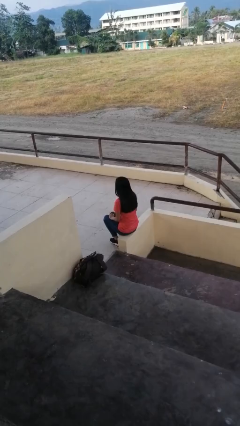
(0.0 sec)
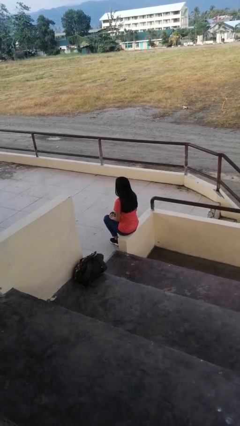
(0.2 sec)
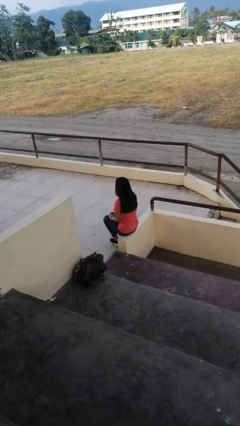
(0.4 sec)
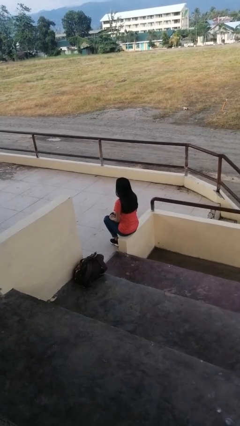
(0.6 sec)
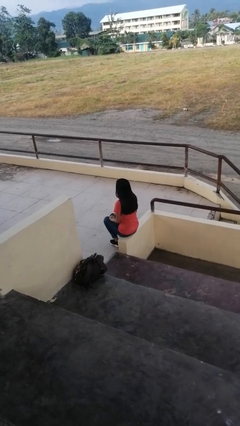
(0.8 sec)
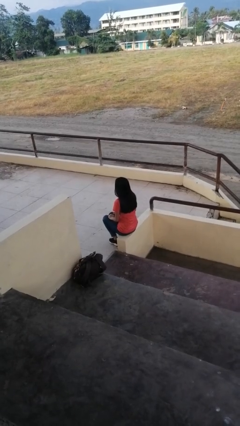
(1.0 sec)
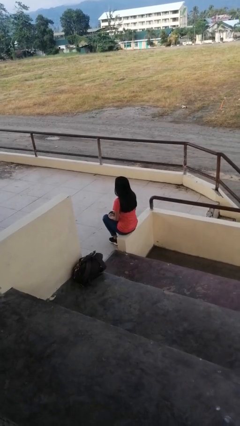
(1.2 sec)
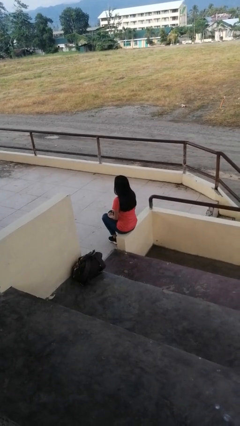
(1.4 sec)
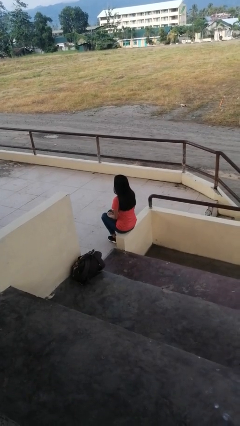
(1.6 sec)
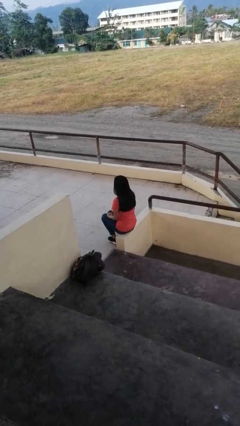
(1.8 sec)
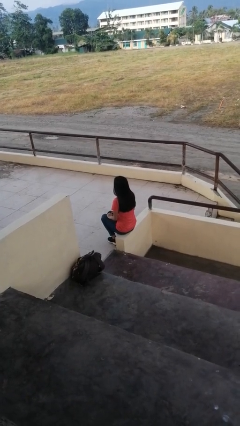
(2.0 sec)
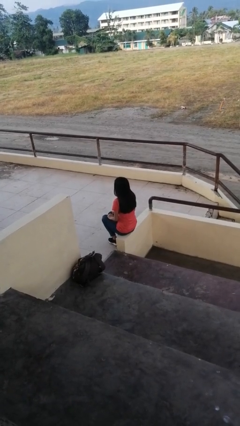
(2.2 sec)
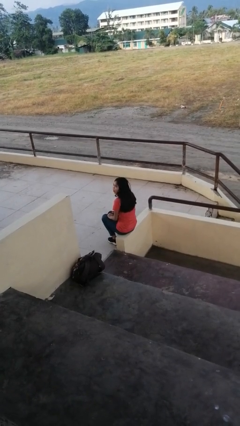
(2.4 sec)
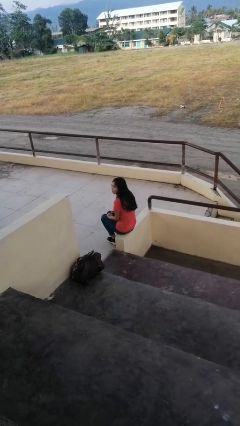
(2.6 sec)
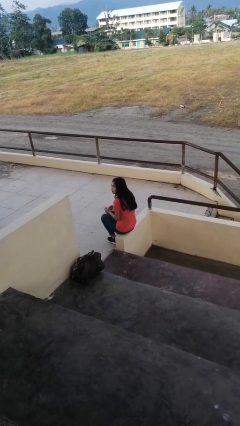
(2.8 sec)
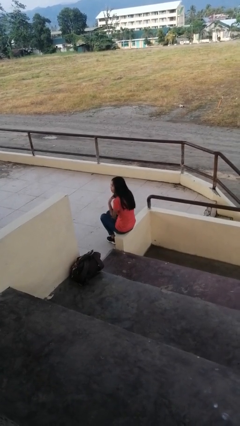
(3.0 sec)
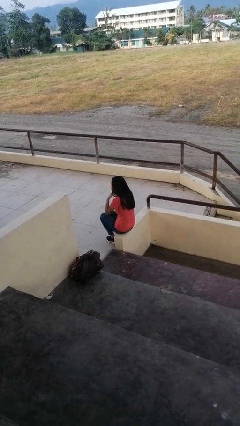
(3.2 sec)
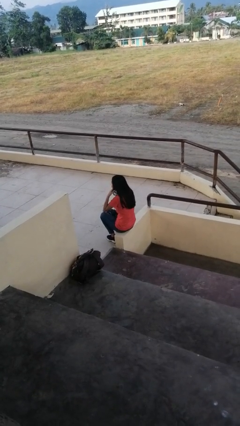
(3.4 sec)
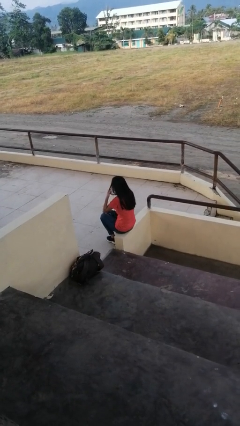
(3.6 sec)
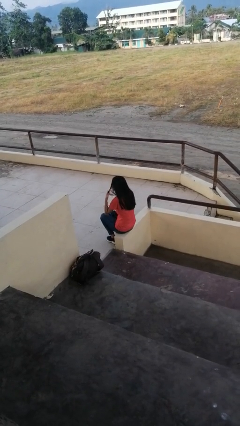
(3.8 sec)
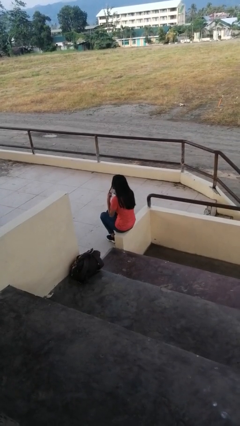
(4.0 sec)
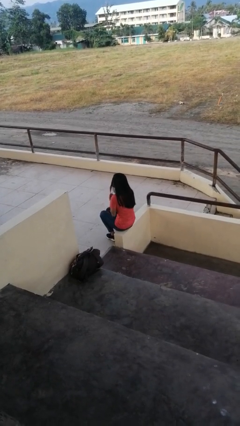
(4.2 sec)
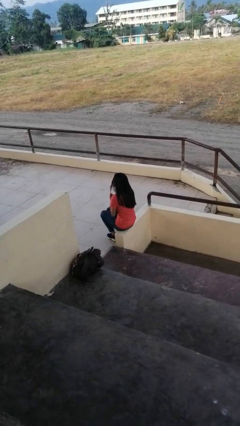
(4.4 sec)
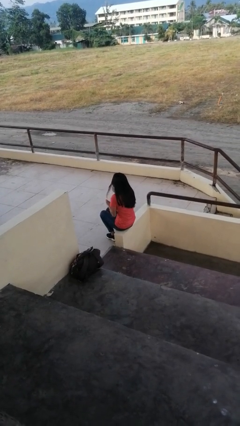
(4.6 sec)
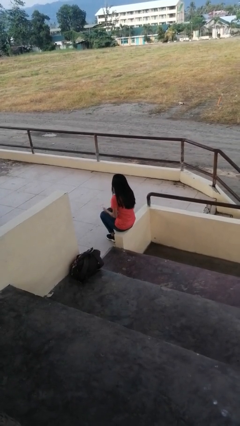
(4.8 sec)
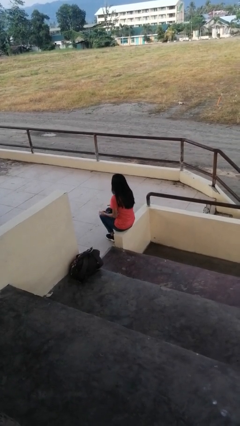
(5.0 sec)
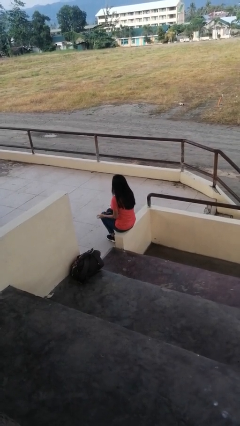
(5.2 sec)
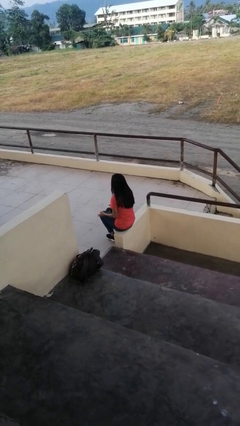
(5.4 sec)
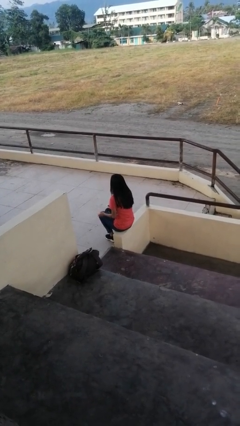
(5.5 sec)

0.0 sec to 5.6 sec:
person takes off headphones

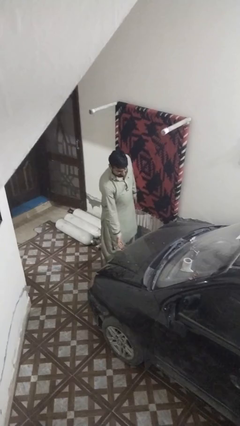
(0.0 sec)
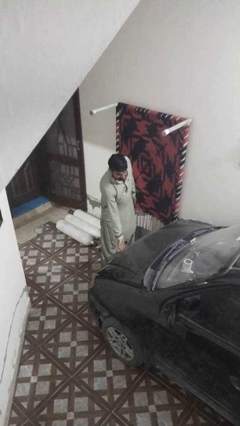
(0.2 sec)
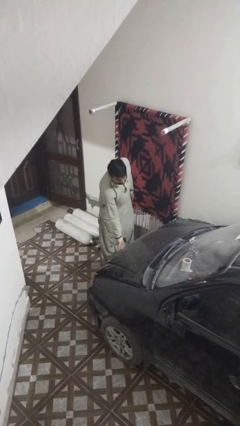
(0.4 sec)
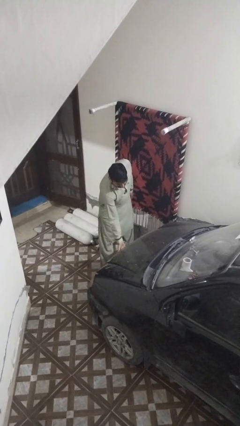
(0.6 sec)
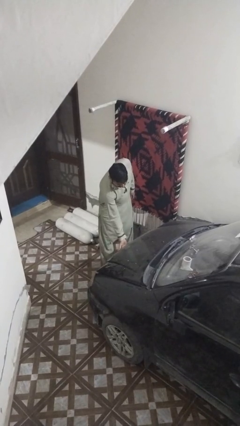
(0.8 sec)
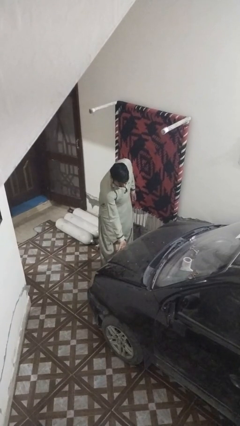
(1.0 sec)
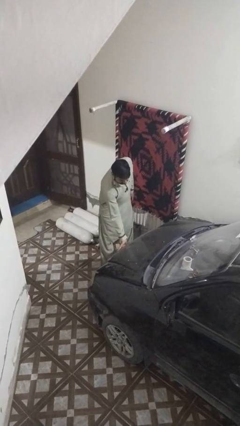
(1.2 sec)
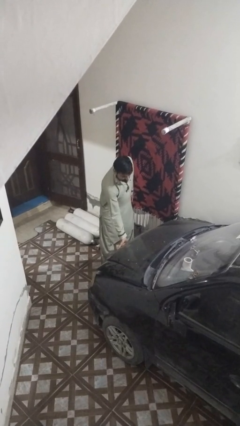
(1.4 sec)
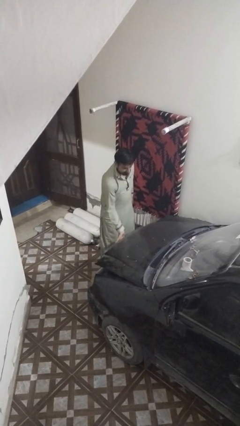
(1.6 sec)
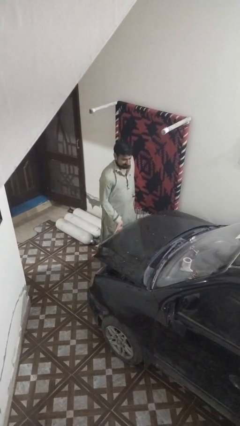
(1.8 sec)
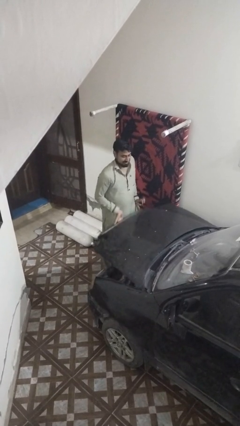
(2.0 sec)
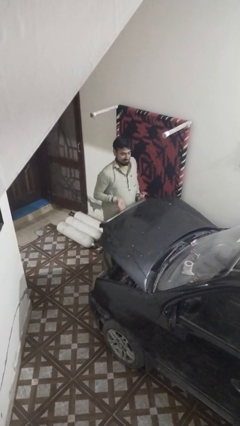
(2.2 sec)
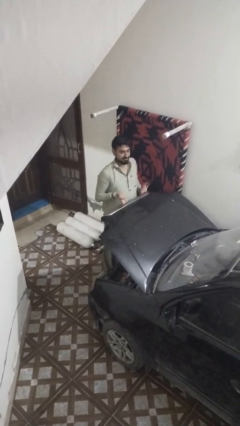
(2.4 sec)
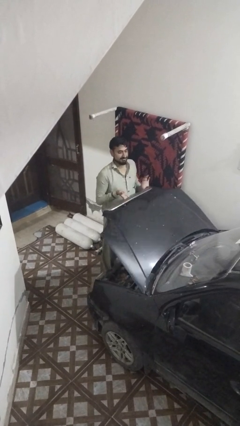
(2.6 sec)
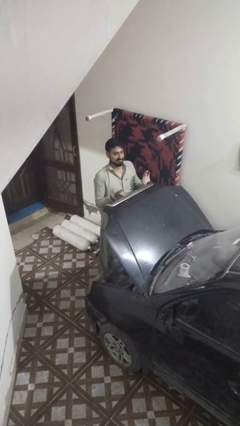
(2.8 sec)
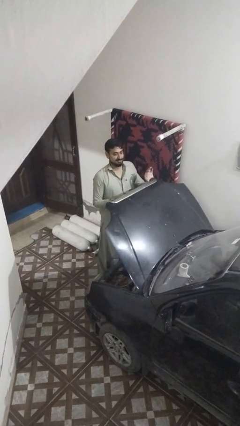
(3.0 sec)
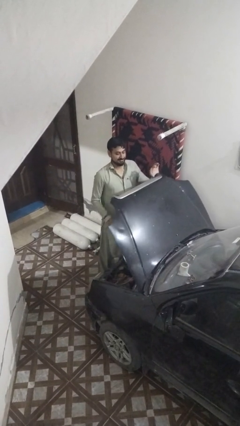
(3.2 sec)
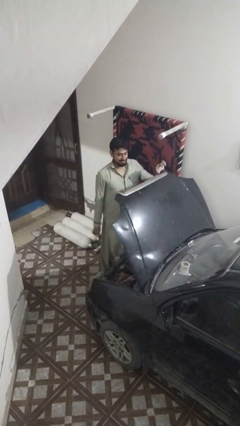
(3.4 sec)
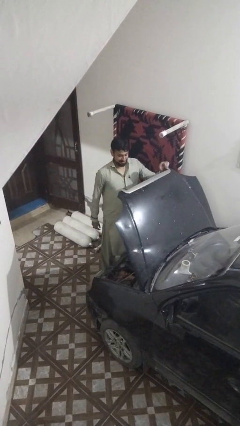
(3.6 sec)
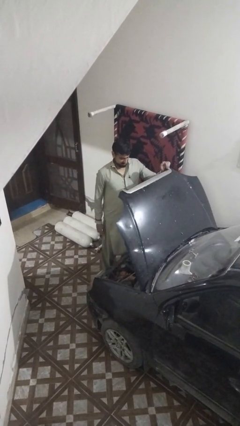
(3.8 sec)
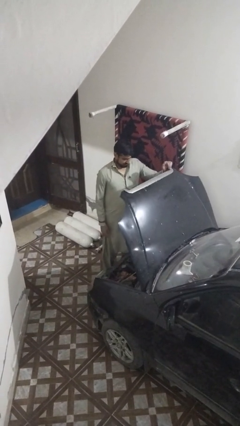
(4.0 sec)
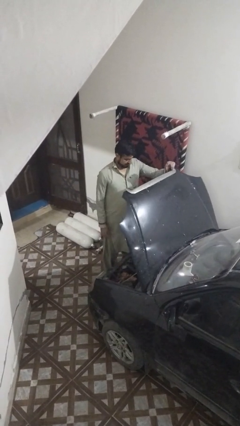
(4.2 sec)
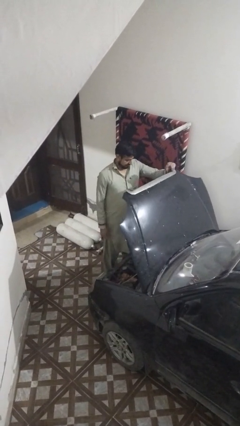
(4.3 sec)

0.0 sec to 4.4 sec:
person opens car hood

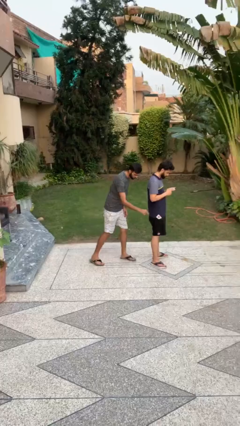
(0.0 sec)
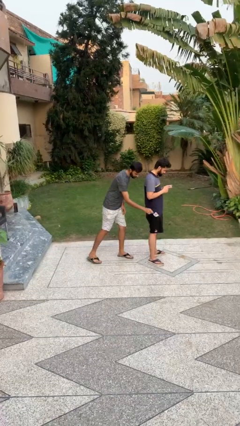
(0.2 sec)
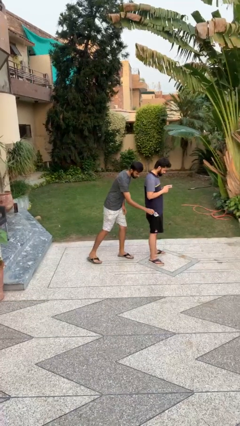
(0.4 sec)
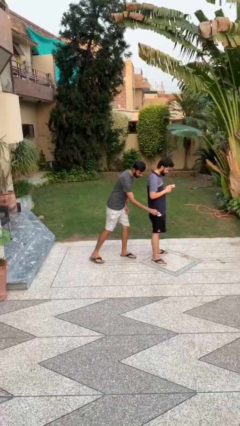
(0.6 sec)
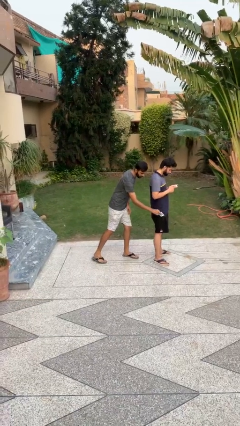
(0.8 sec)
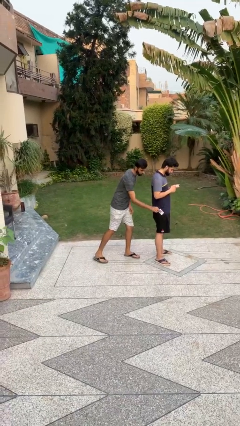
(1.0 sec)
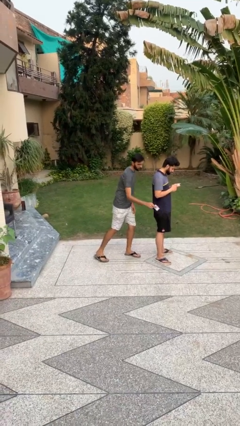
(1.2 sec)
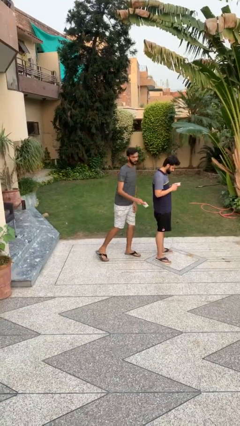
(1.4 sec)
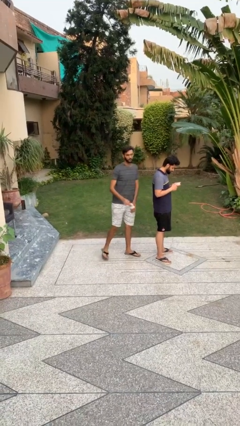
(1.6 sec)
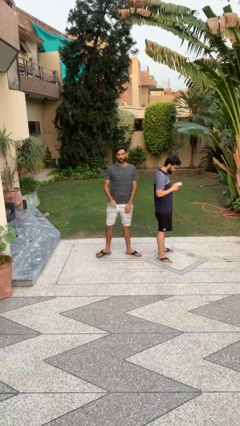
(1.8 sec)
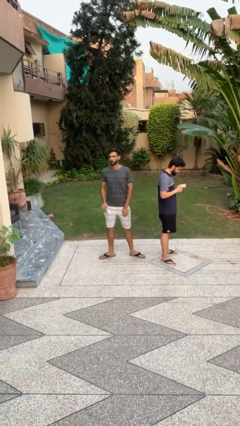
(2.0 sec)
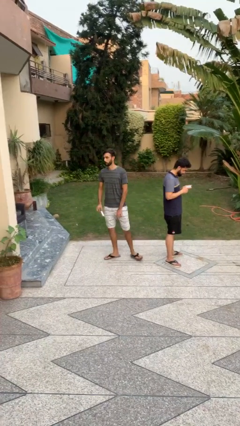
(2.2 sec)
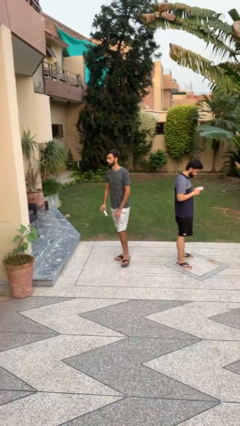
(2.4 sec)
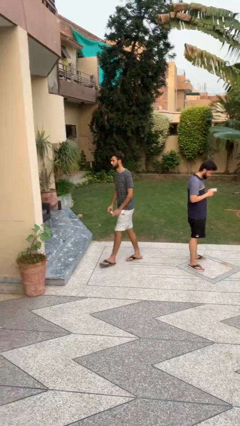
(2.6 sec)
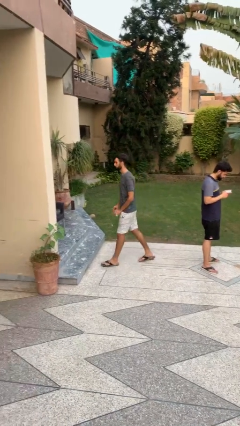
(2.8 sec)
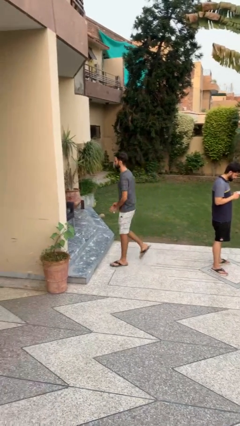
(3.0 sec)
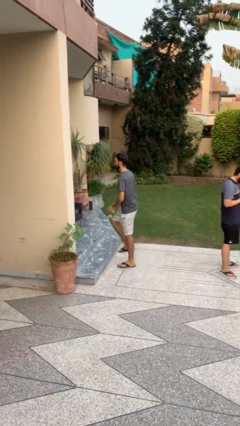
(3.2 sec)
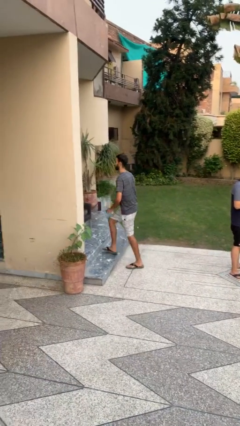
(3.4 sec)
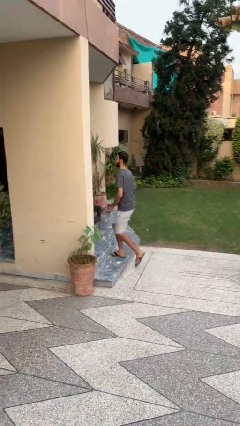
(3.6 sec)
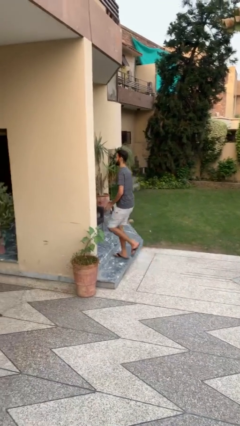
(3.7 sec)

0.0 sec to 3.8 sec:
person steals object from person

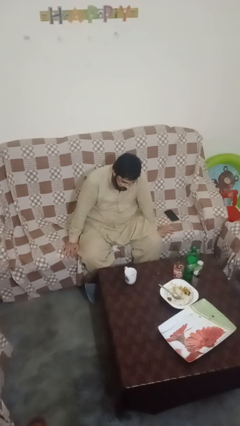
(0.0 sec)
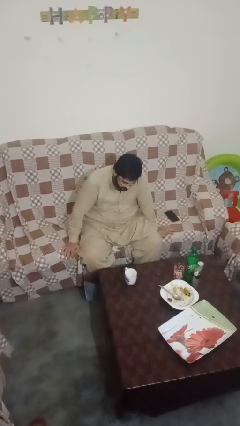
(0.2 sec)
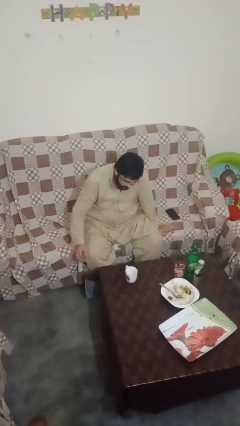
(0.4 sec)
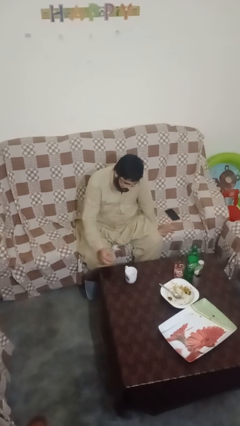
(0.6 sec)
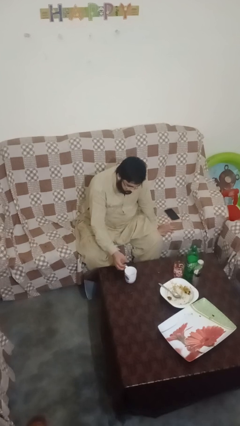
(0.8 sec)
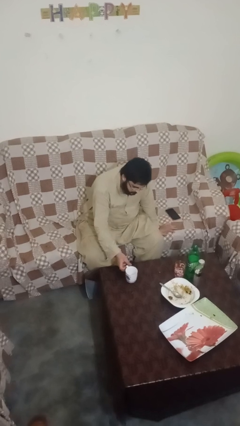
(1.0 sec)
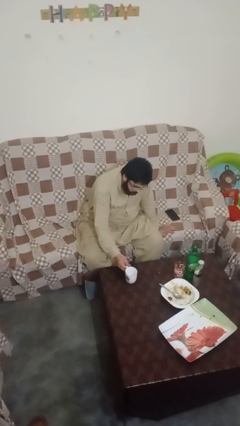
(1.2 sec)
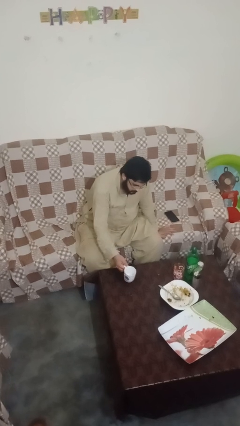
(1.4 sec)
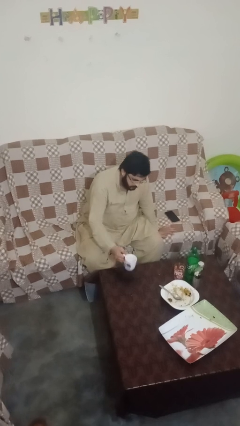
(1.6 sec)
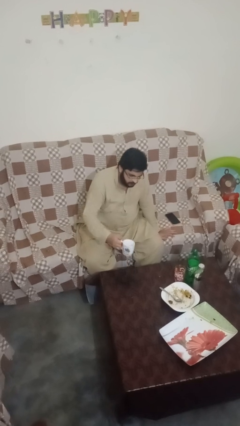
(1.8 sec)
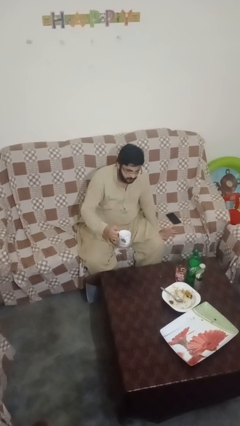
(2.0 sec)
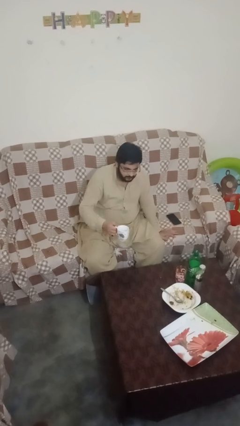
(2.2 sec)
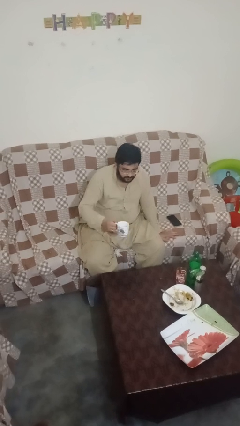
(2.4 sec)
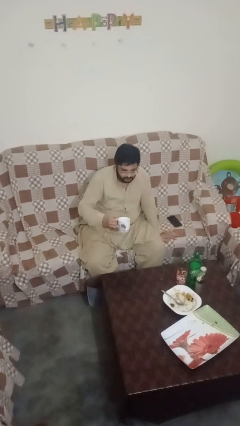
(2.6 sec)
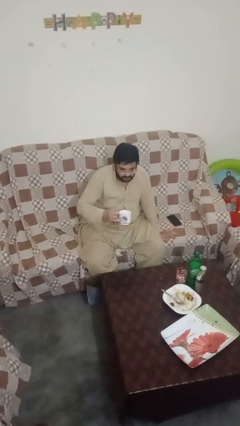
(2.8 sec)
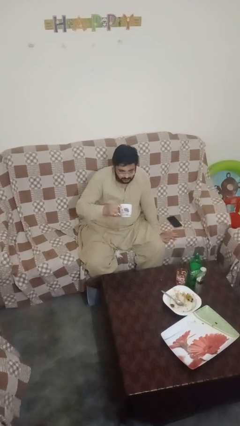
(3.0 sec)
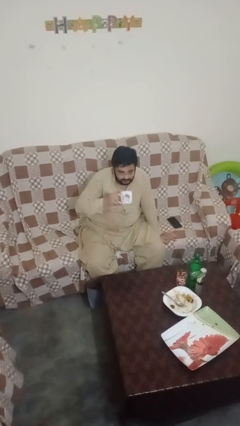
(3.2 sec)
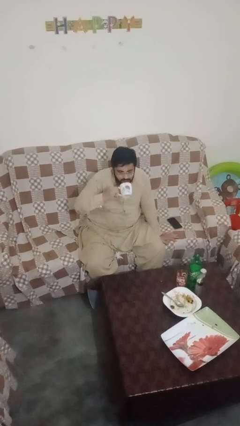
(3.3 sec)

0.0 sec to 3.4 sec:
person picks up object from table
